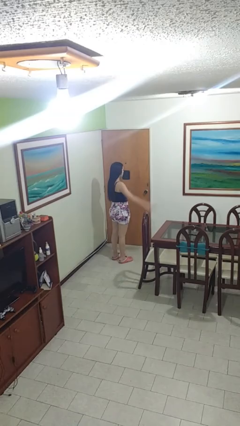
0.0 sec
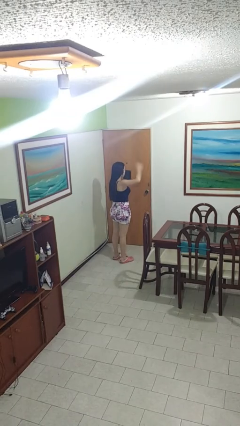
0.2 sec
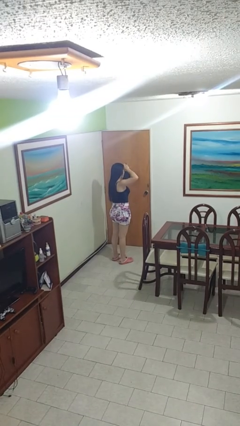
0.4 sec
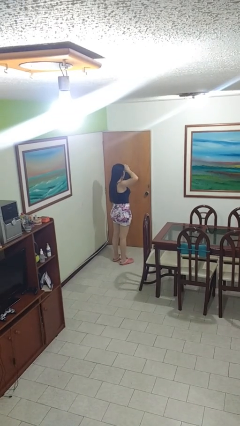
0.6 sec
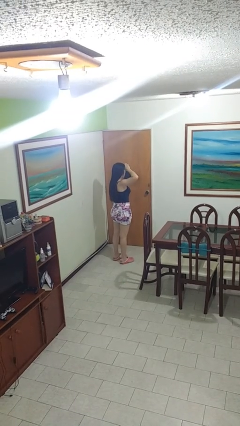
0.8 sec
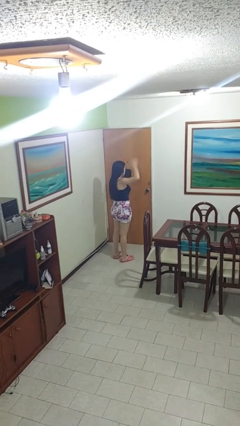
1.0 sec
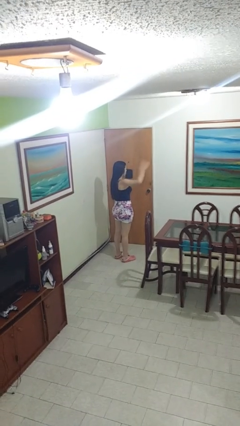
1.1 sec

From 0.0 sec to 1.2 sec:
person salutes

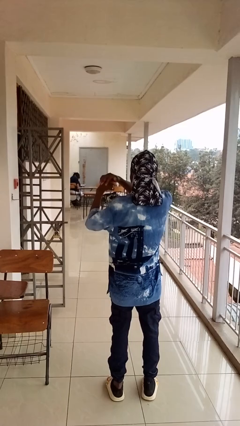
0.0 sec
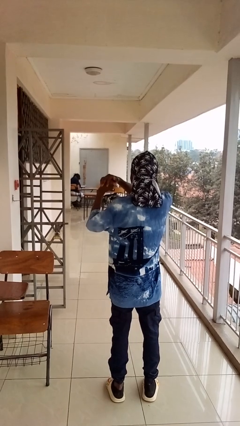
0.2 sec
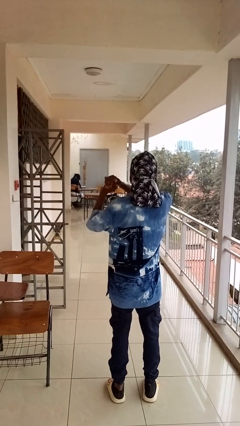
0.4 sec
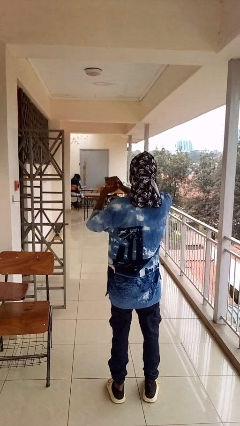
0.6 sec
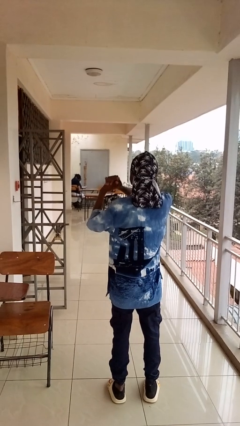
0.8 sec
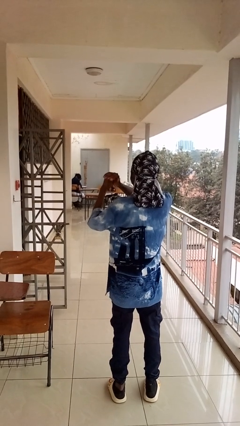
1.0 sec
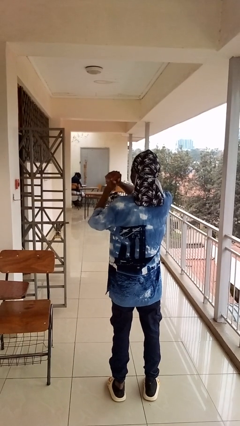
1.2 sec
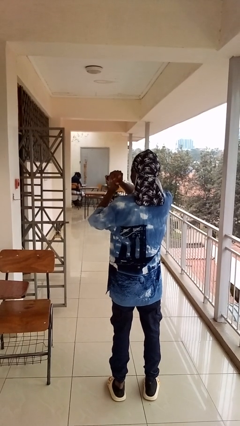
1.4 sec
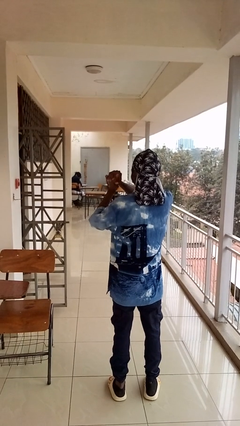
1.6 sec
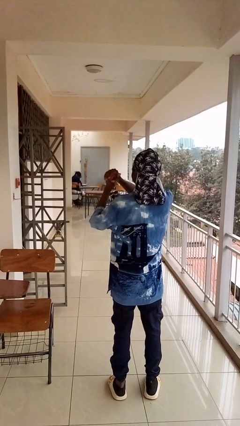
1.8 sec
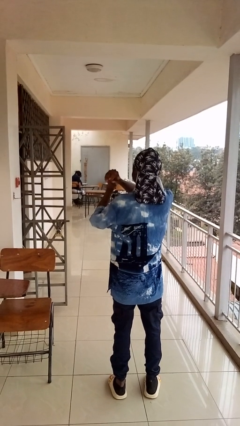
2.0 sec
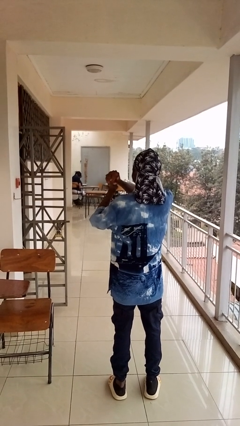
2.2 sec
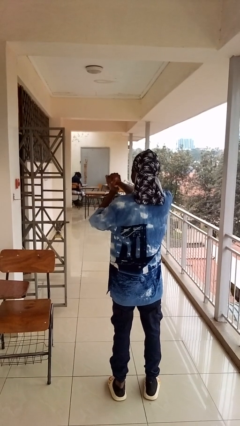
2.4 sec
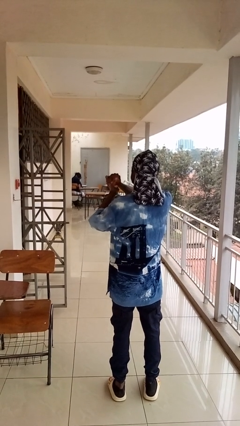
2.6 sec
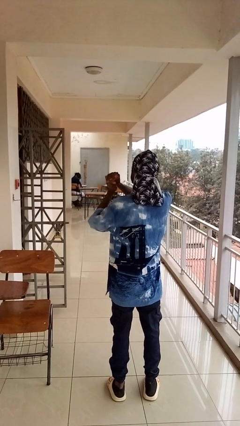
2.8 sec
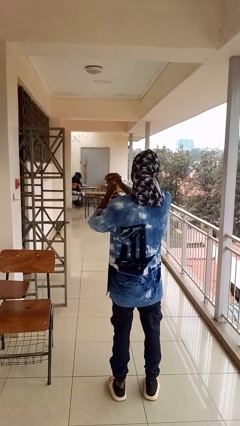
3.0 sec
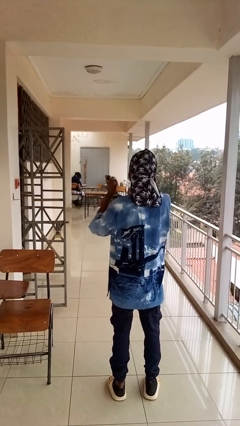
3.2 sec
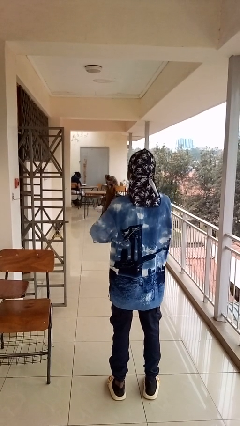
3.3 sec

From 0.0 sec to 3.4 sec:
person cracks knuckles

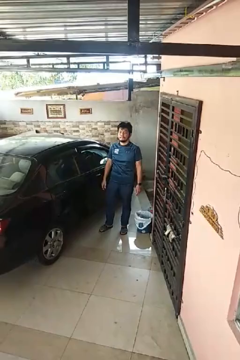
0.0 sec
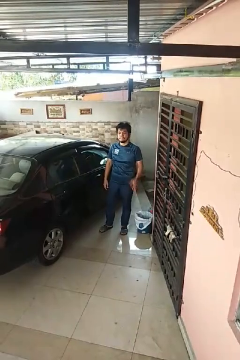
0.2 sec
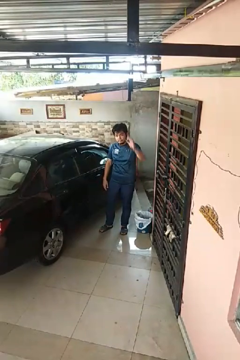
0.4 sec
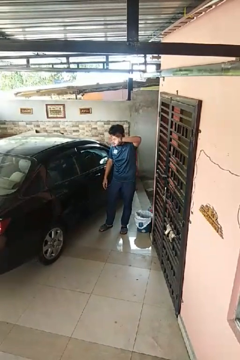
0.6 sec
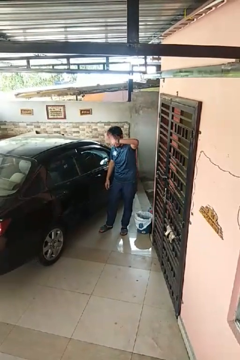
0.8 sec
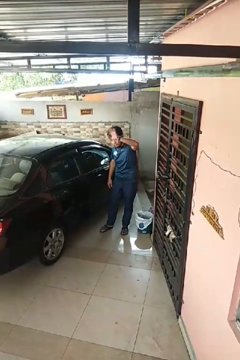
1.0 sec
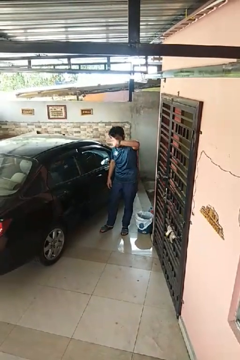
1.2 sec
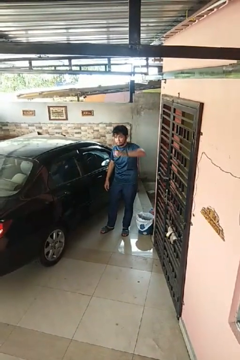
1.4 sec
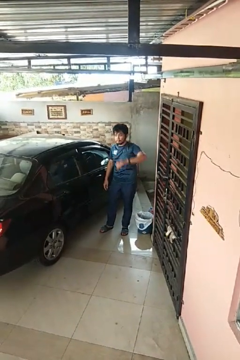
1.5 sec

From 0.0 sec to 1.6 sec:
person waves at person

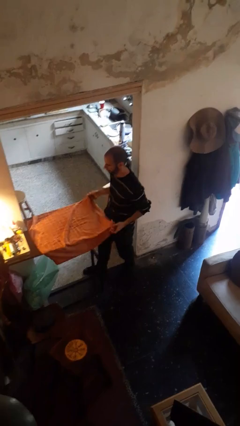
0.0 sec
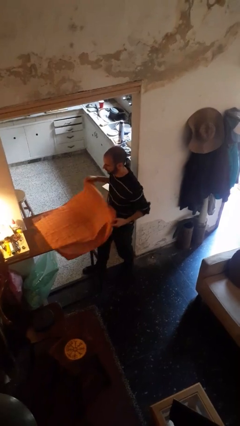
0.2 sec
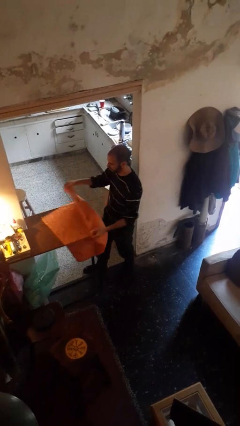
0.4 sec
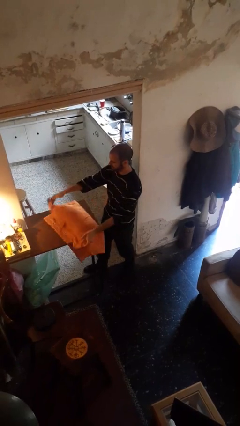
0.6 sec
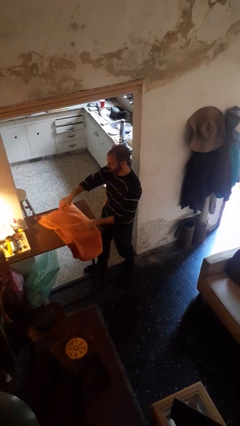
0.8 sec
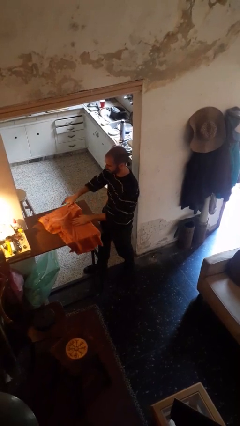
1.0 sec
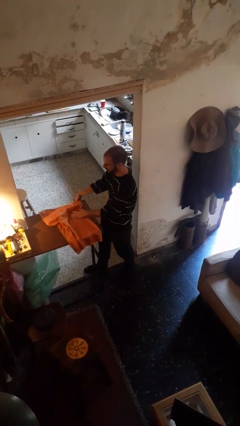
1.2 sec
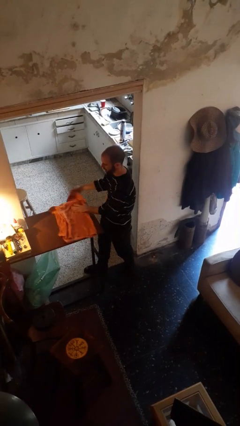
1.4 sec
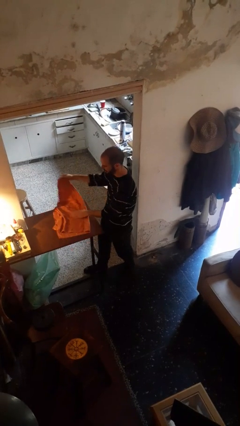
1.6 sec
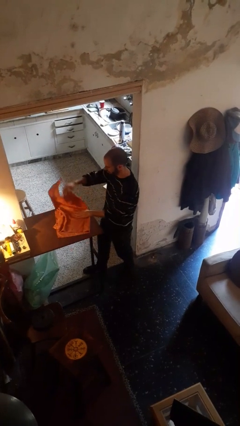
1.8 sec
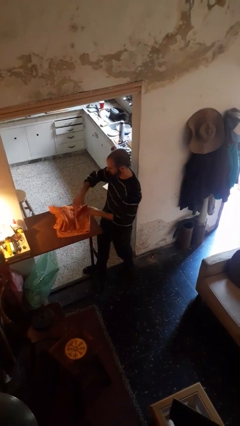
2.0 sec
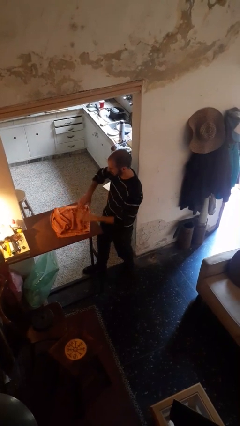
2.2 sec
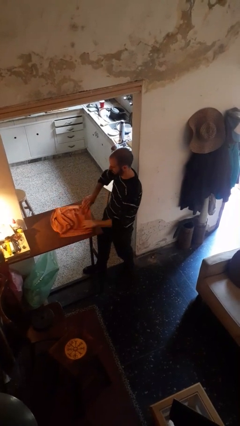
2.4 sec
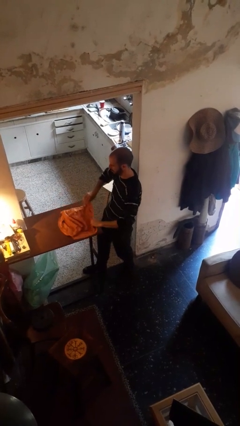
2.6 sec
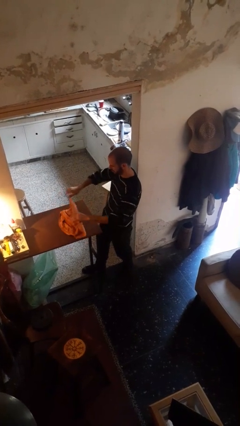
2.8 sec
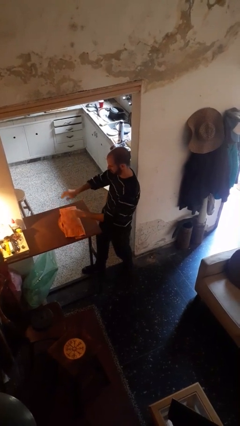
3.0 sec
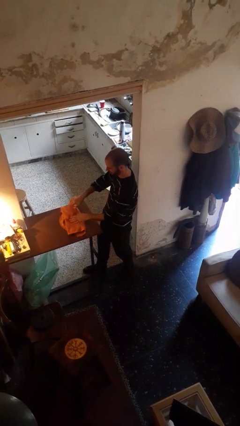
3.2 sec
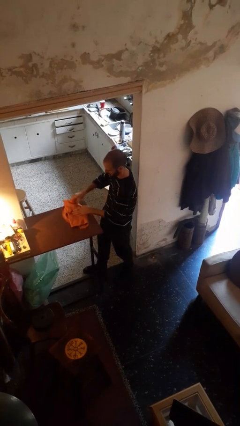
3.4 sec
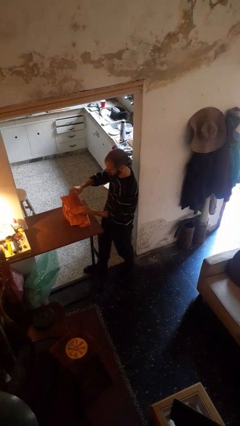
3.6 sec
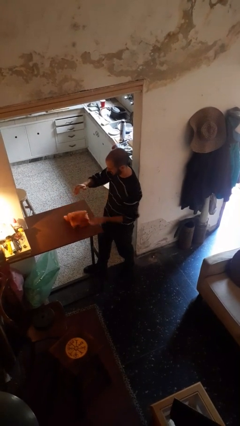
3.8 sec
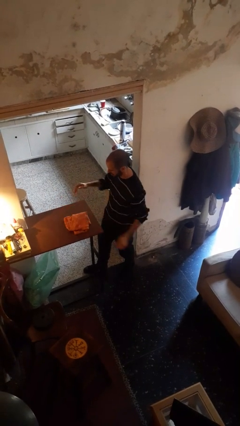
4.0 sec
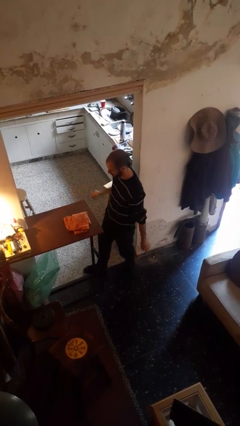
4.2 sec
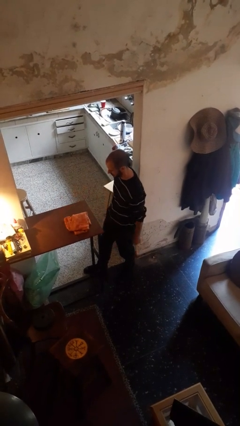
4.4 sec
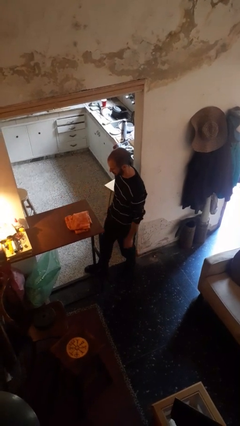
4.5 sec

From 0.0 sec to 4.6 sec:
person folds tablecloth

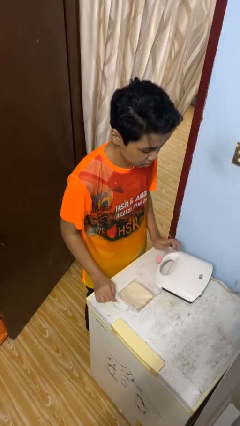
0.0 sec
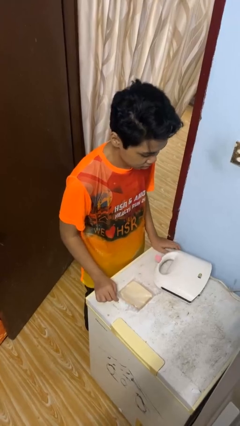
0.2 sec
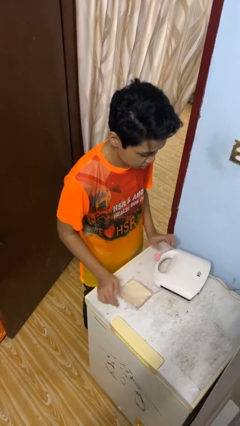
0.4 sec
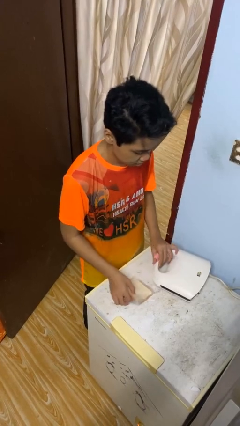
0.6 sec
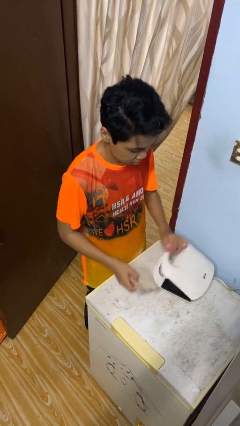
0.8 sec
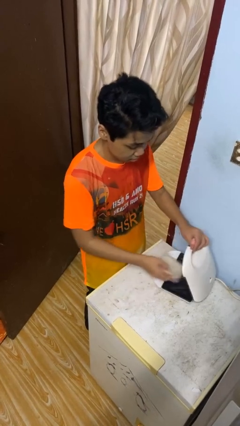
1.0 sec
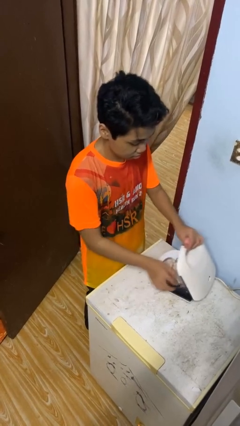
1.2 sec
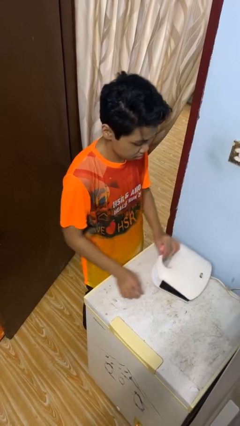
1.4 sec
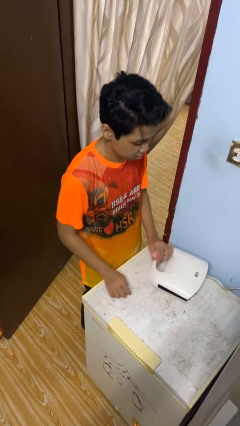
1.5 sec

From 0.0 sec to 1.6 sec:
person puts object into toaster

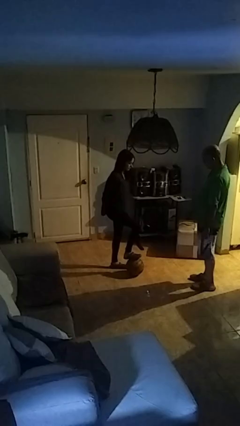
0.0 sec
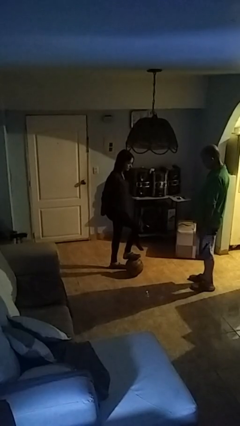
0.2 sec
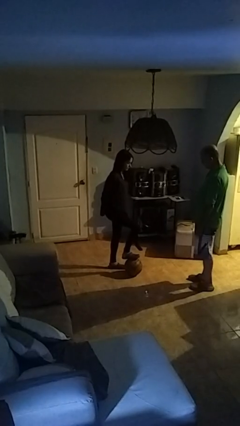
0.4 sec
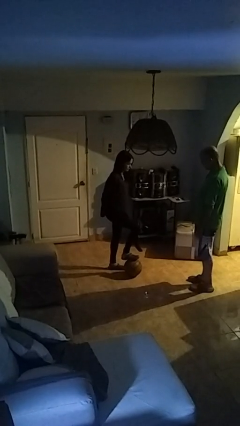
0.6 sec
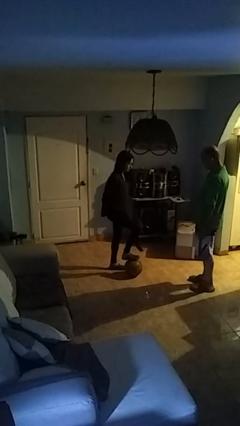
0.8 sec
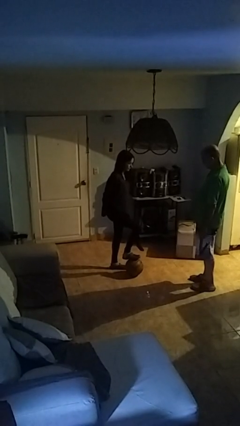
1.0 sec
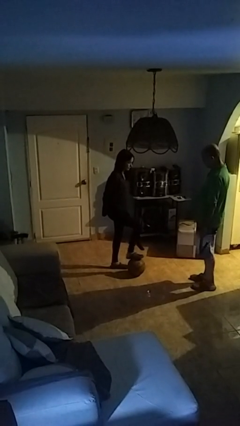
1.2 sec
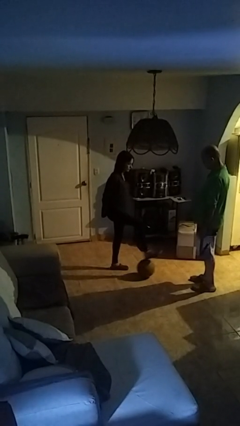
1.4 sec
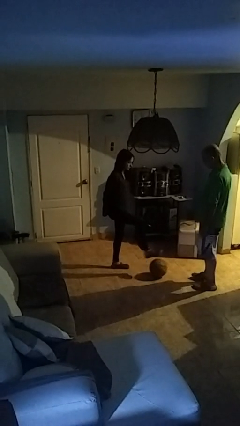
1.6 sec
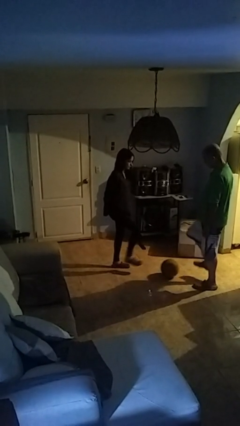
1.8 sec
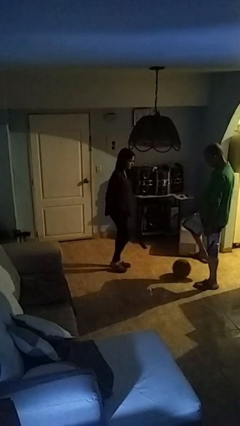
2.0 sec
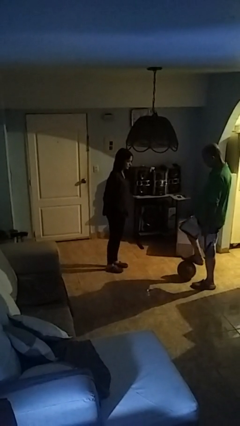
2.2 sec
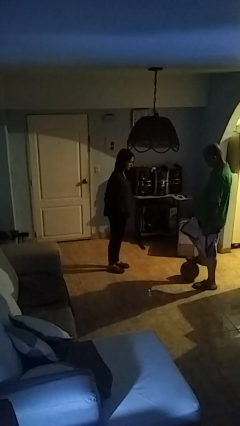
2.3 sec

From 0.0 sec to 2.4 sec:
person kicks object to person

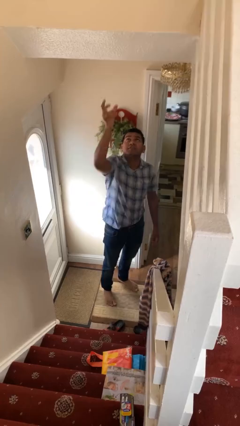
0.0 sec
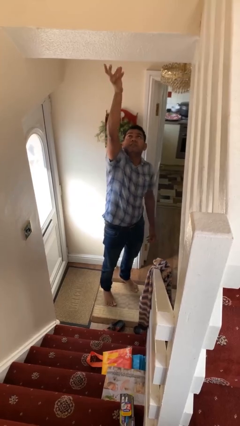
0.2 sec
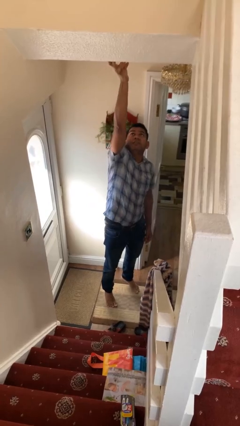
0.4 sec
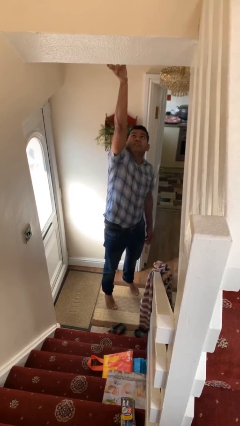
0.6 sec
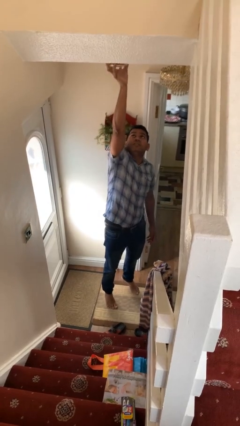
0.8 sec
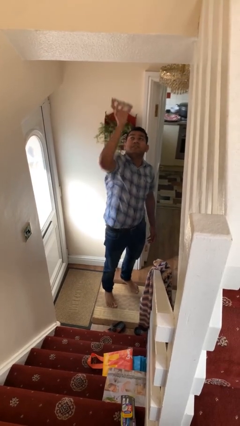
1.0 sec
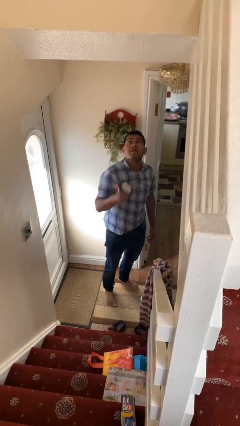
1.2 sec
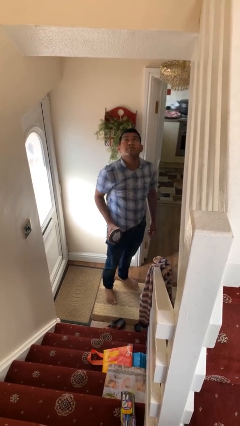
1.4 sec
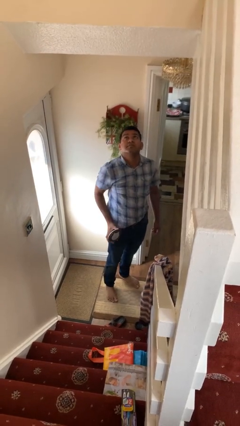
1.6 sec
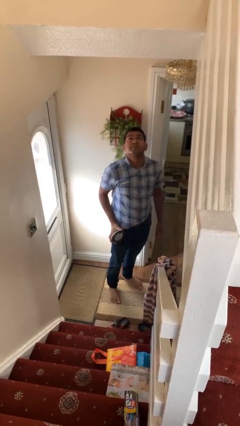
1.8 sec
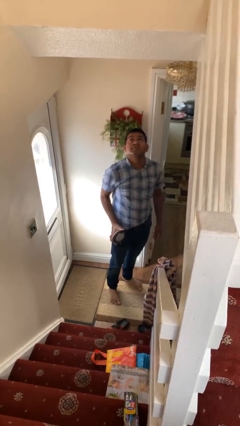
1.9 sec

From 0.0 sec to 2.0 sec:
person takes down smoke detector

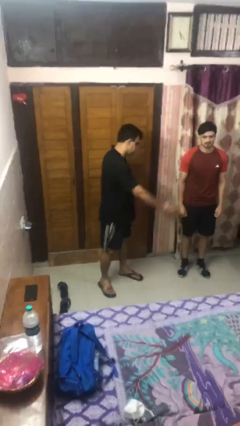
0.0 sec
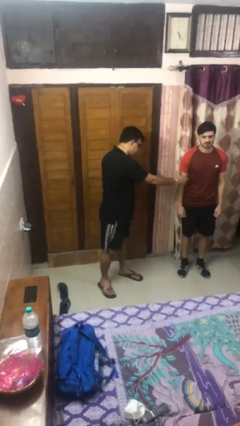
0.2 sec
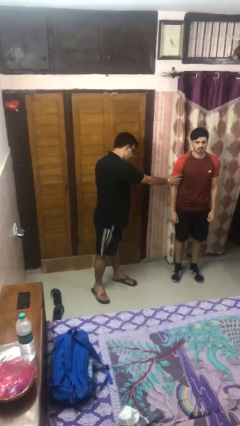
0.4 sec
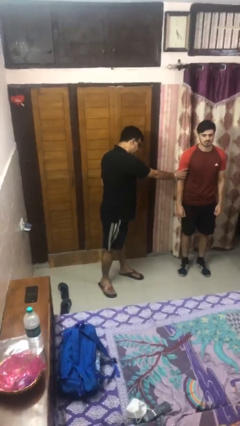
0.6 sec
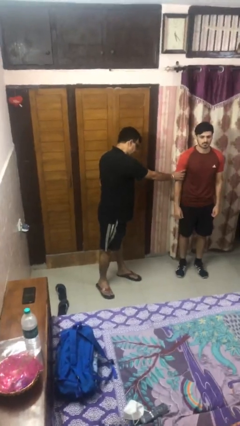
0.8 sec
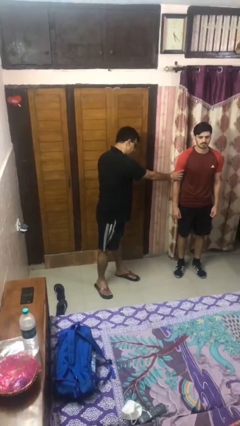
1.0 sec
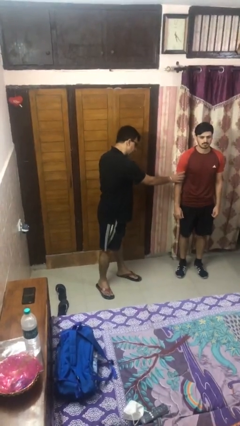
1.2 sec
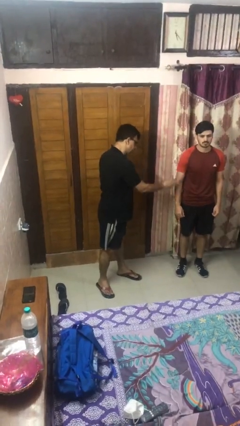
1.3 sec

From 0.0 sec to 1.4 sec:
person grabs person by bicep
